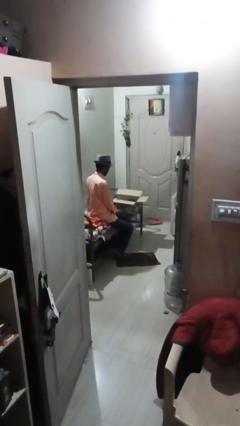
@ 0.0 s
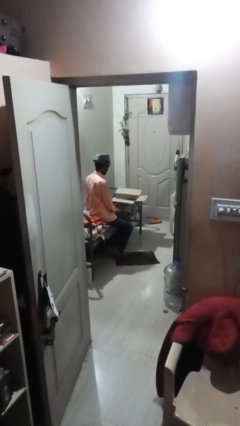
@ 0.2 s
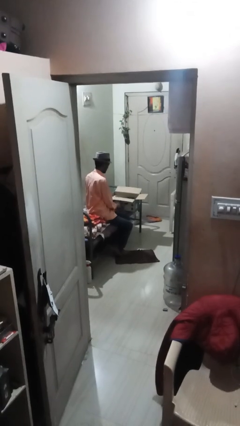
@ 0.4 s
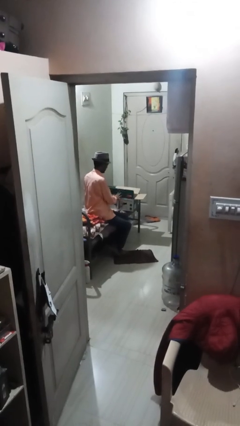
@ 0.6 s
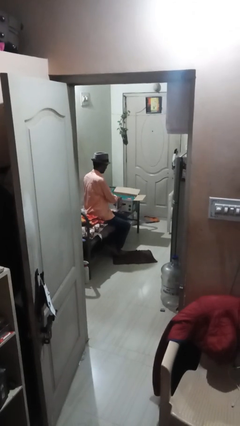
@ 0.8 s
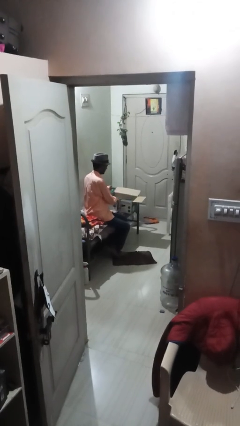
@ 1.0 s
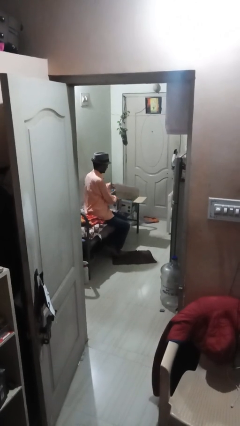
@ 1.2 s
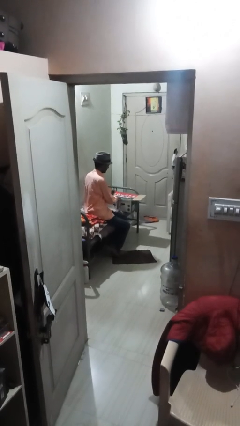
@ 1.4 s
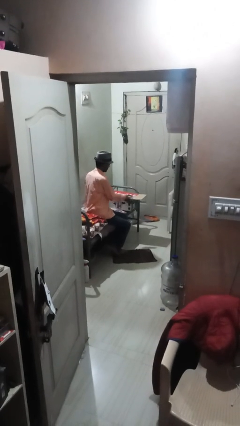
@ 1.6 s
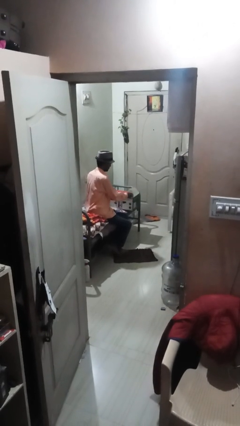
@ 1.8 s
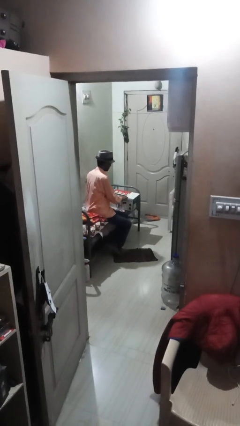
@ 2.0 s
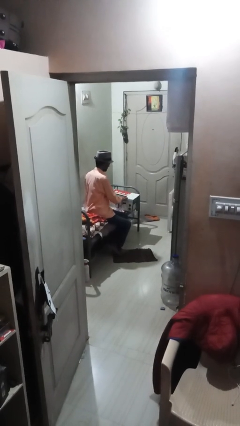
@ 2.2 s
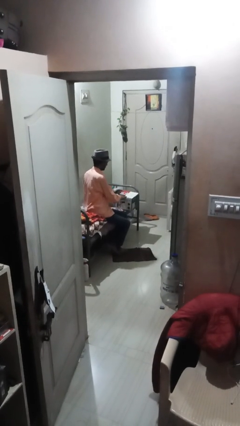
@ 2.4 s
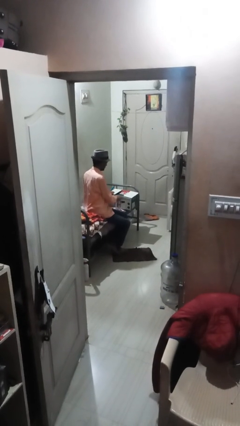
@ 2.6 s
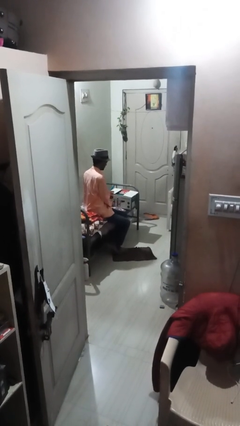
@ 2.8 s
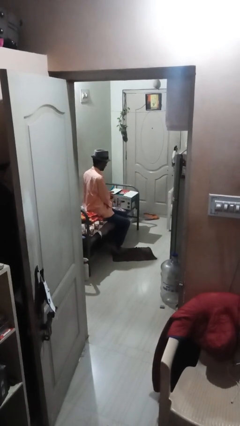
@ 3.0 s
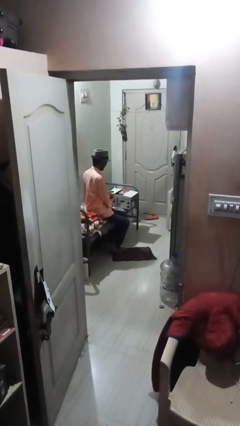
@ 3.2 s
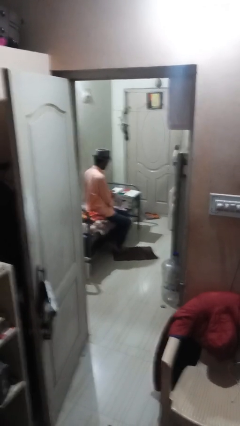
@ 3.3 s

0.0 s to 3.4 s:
person closes box

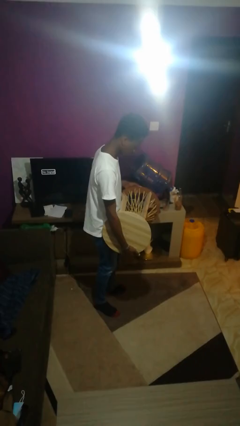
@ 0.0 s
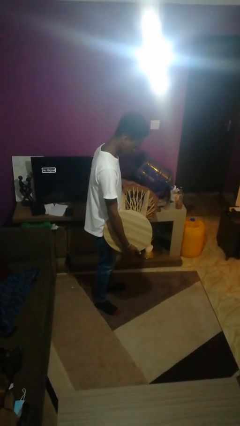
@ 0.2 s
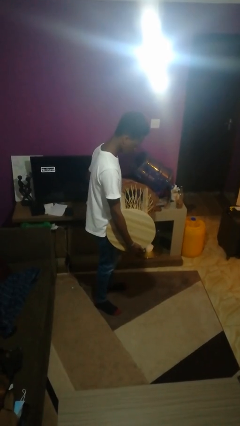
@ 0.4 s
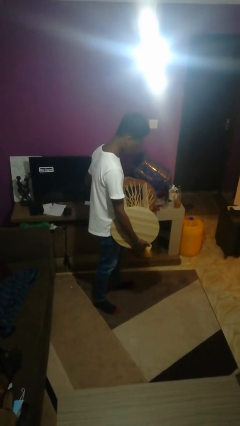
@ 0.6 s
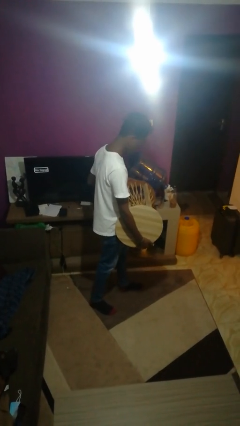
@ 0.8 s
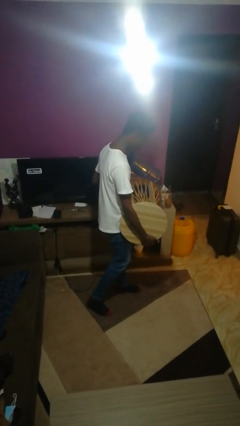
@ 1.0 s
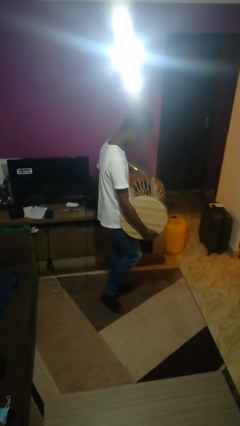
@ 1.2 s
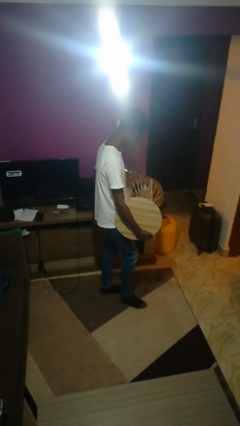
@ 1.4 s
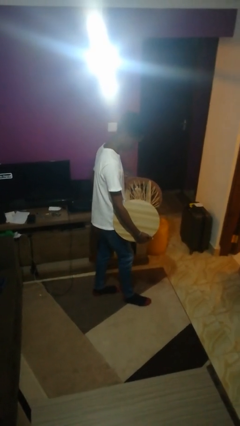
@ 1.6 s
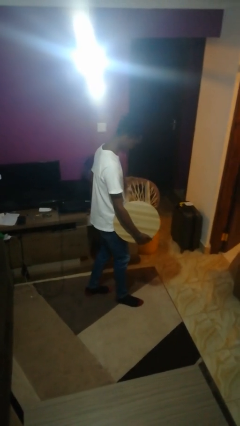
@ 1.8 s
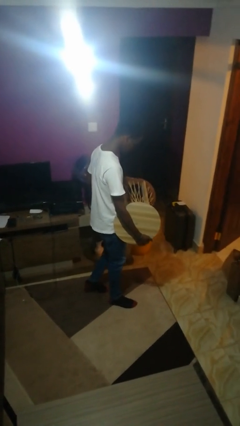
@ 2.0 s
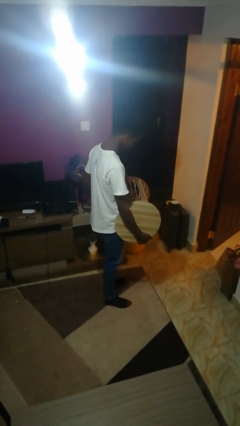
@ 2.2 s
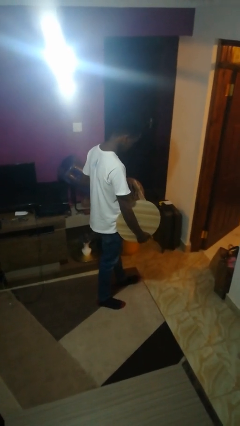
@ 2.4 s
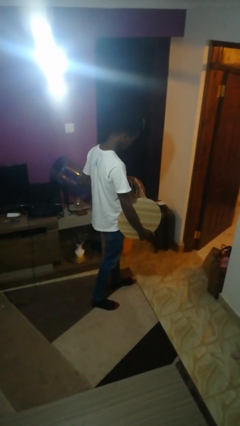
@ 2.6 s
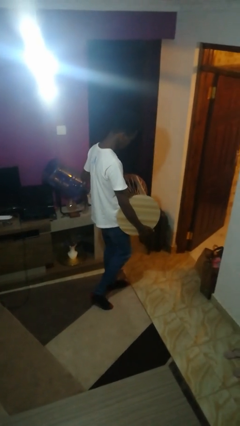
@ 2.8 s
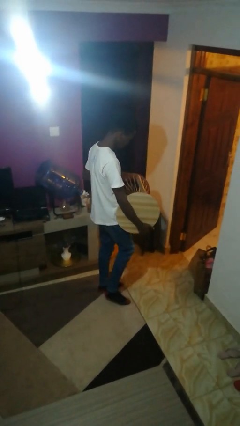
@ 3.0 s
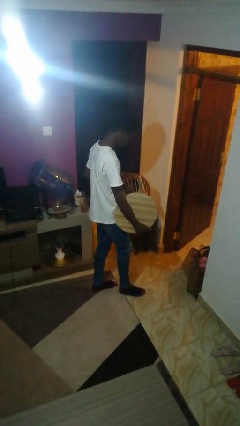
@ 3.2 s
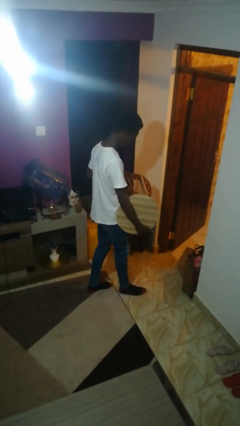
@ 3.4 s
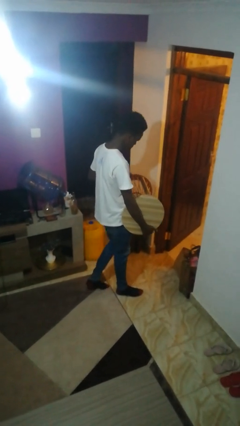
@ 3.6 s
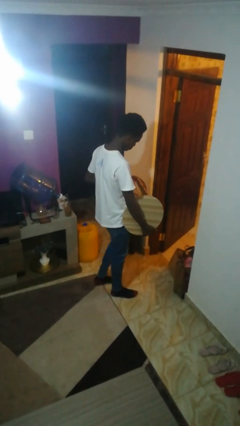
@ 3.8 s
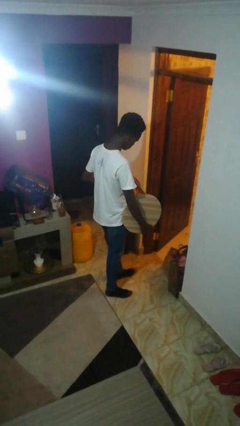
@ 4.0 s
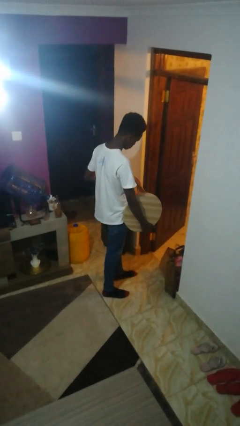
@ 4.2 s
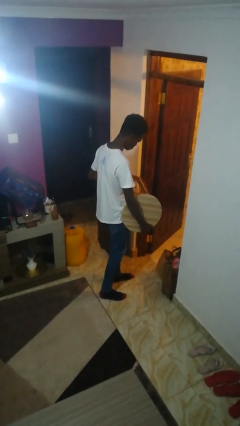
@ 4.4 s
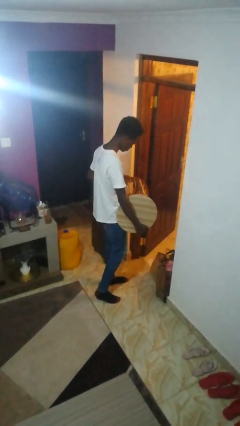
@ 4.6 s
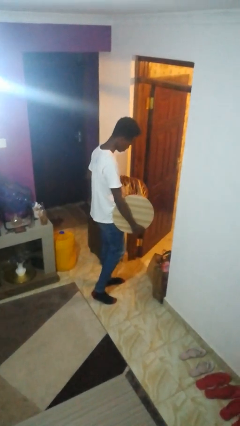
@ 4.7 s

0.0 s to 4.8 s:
person carries furniture

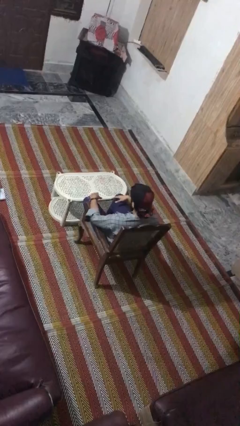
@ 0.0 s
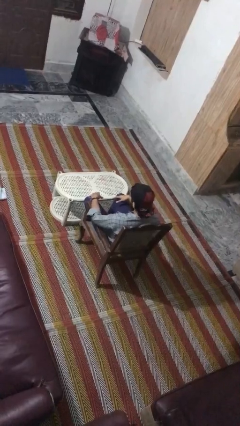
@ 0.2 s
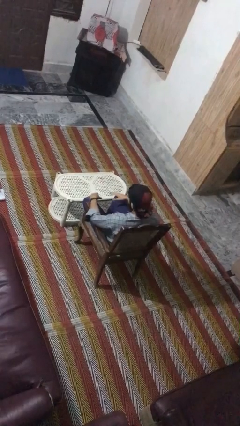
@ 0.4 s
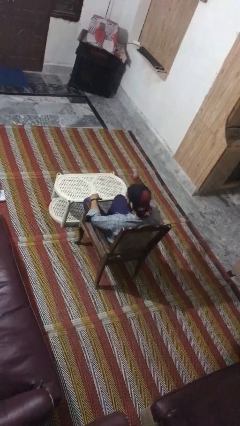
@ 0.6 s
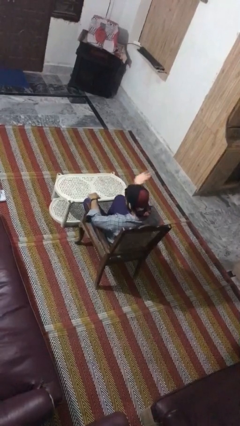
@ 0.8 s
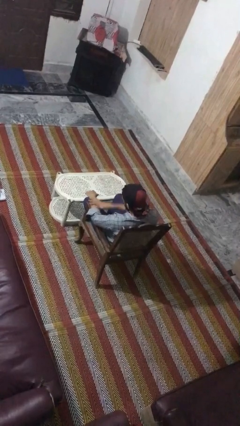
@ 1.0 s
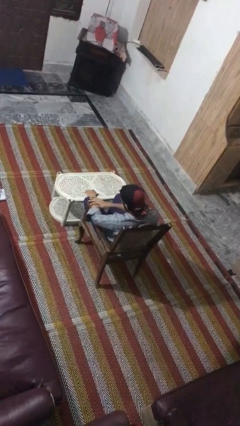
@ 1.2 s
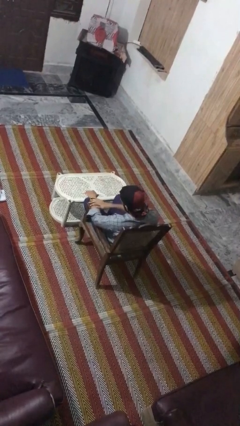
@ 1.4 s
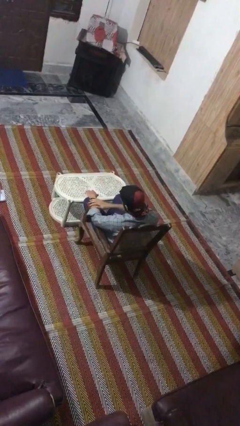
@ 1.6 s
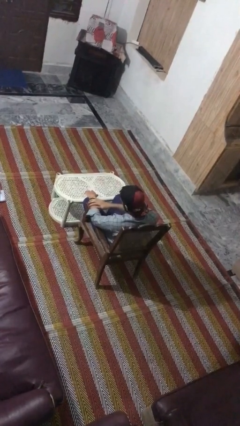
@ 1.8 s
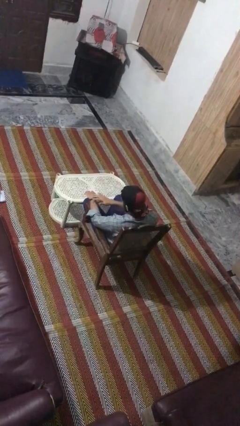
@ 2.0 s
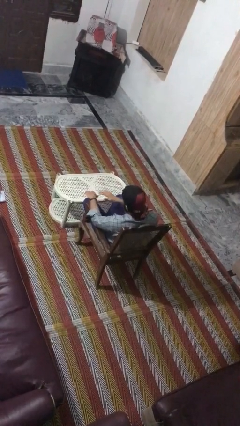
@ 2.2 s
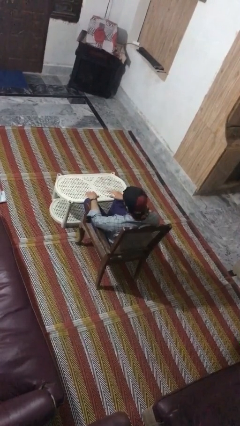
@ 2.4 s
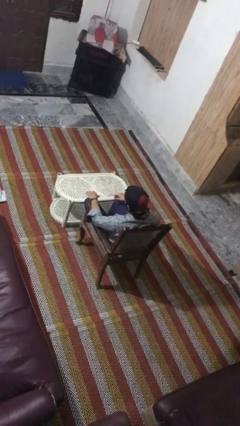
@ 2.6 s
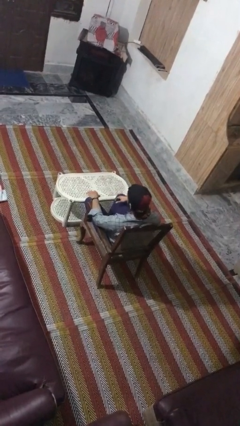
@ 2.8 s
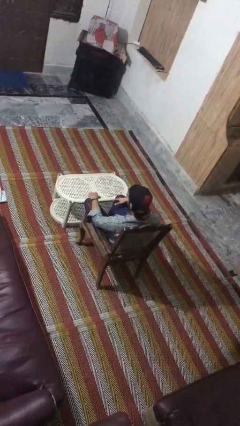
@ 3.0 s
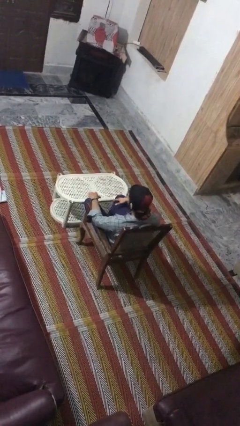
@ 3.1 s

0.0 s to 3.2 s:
person swats bug

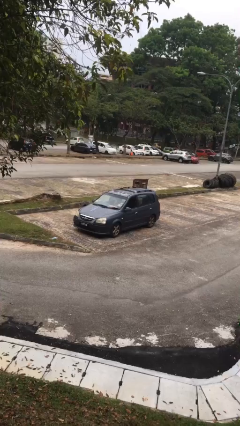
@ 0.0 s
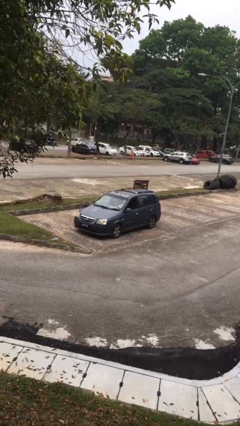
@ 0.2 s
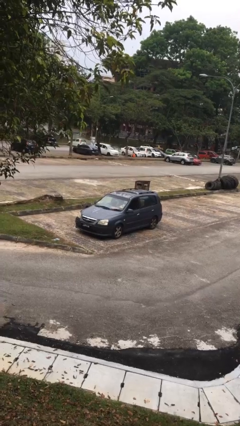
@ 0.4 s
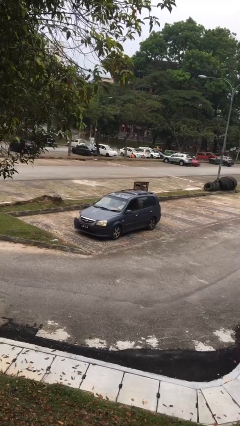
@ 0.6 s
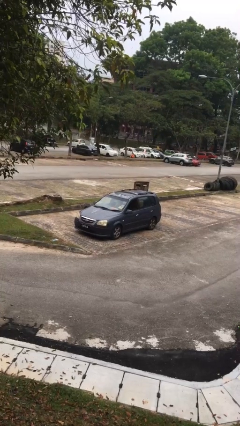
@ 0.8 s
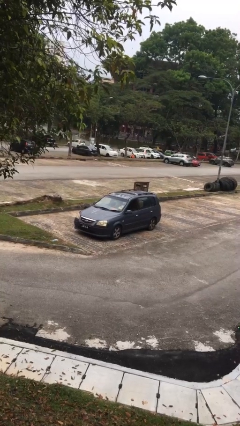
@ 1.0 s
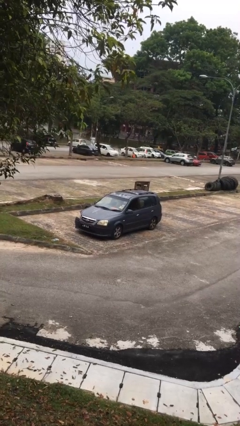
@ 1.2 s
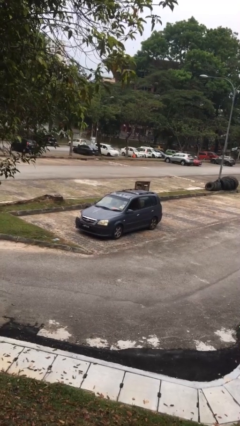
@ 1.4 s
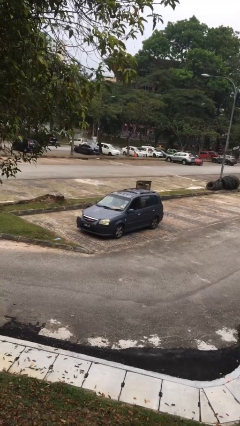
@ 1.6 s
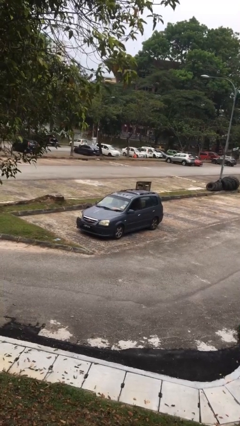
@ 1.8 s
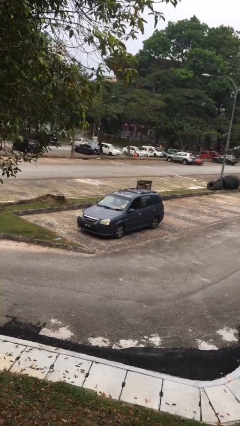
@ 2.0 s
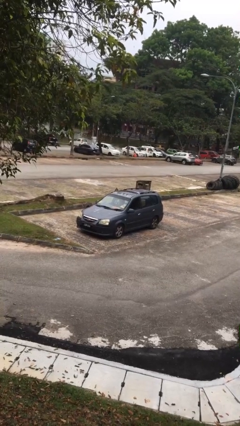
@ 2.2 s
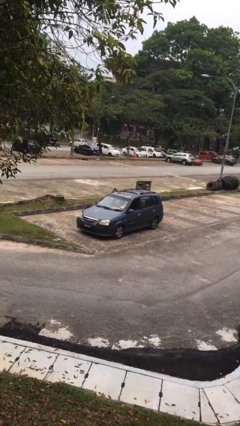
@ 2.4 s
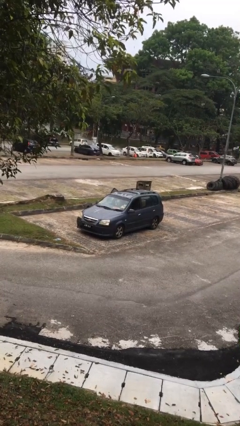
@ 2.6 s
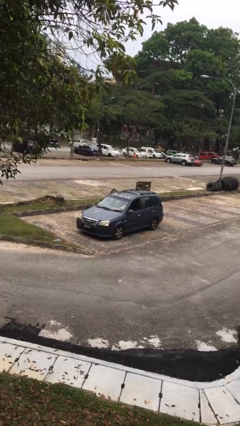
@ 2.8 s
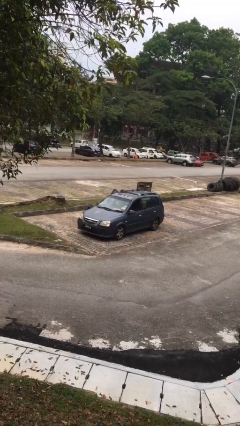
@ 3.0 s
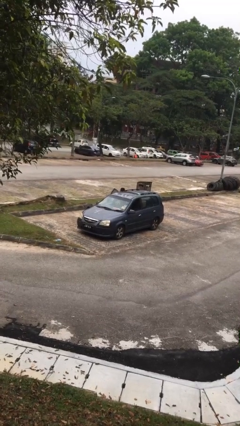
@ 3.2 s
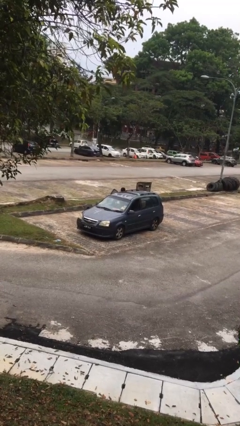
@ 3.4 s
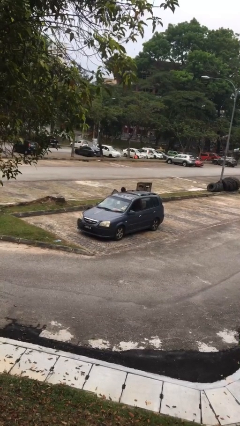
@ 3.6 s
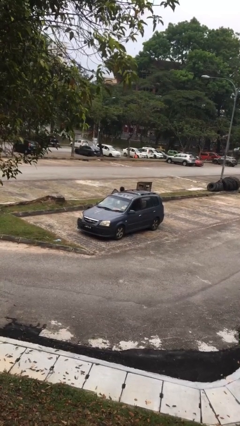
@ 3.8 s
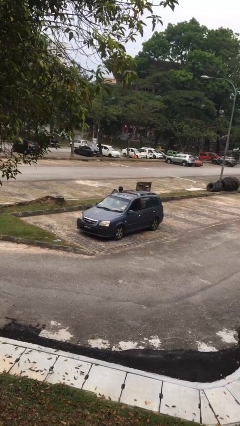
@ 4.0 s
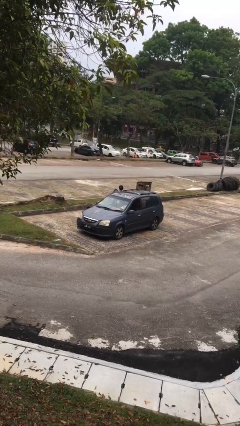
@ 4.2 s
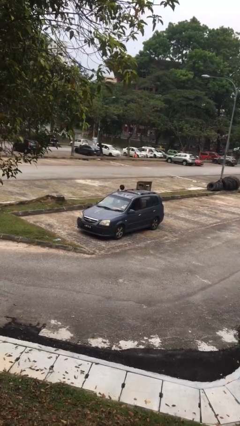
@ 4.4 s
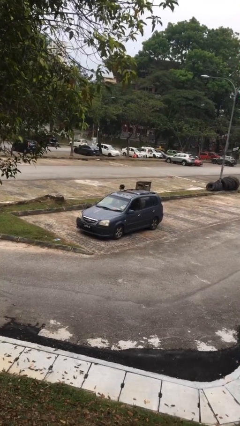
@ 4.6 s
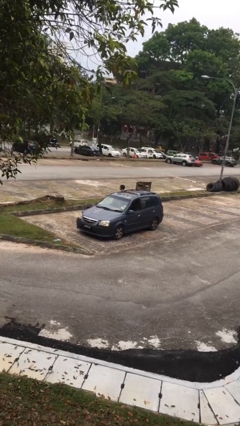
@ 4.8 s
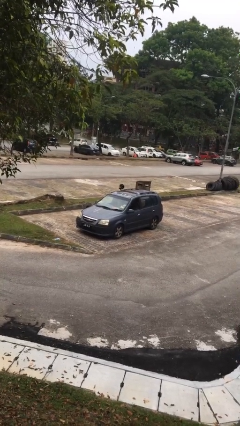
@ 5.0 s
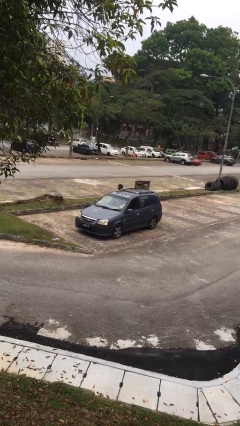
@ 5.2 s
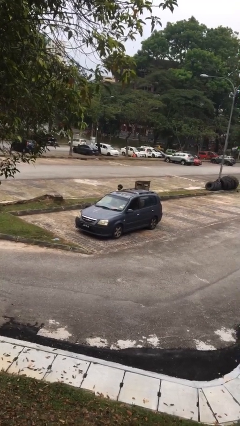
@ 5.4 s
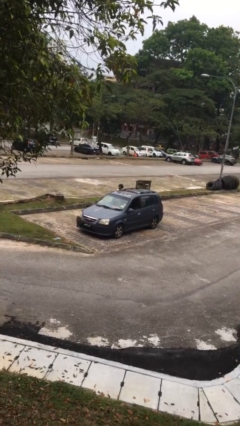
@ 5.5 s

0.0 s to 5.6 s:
car drops off person

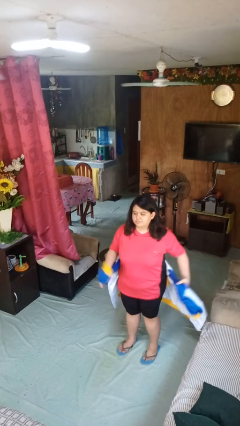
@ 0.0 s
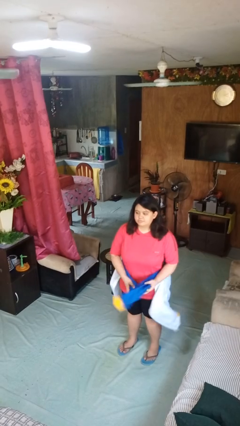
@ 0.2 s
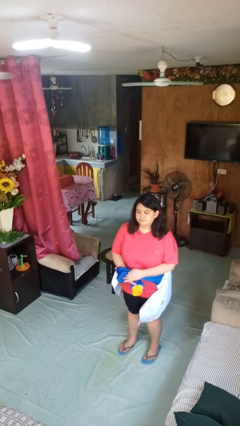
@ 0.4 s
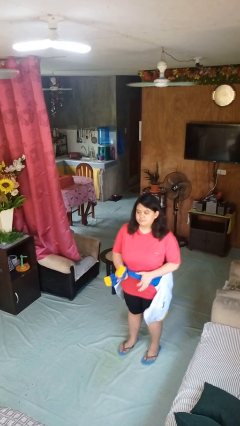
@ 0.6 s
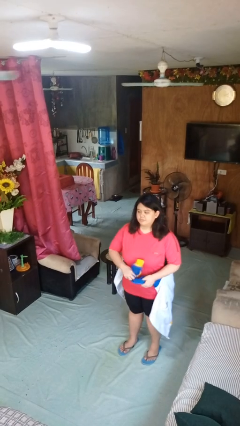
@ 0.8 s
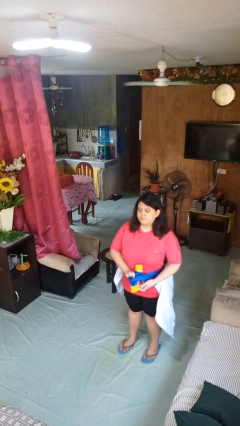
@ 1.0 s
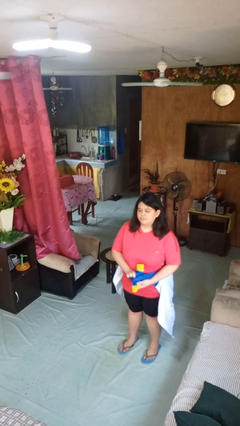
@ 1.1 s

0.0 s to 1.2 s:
person ties jacket around waist
